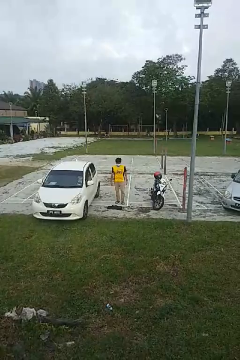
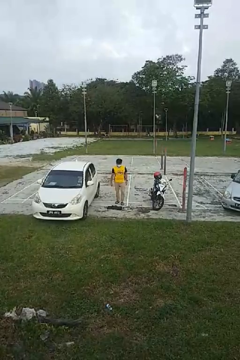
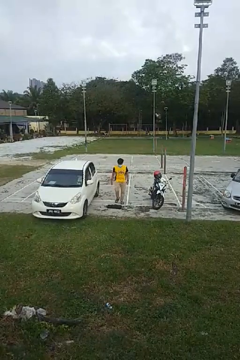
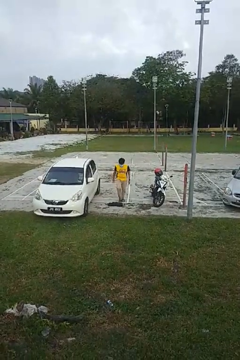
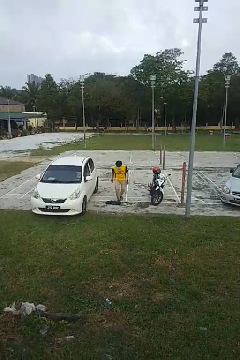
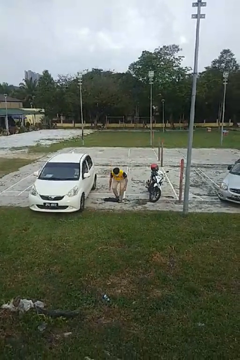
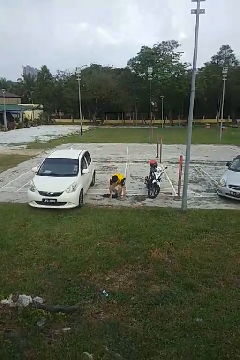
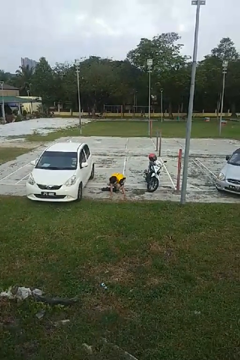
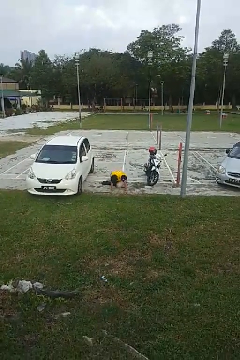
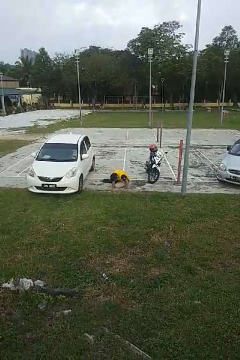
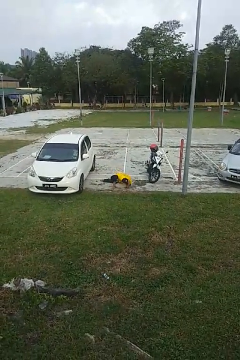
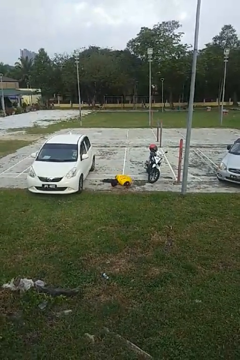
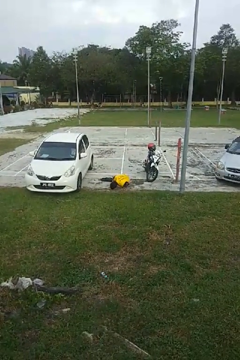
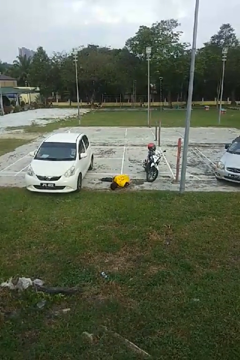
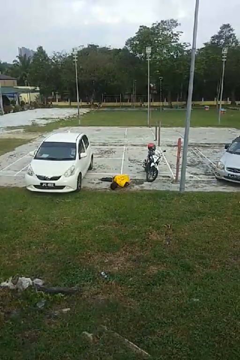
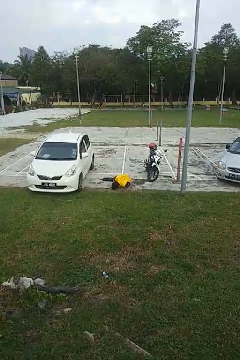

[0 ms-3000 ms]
person trips on object on floor

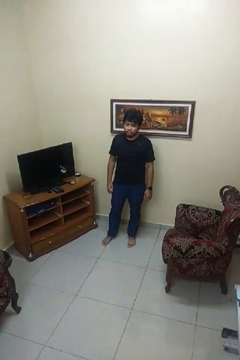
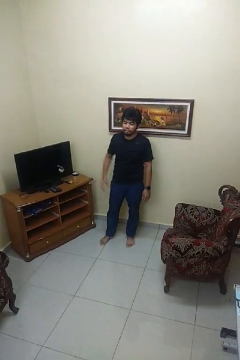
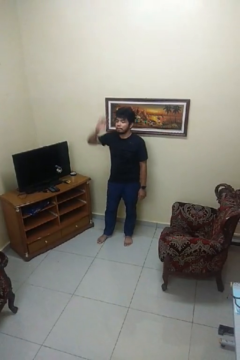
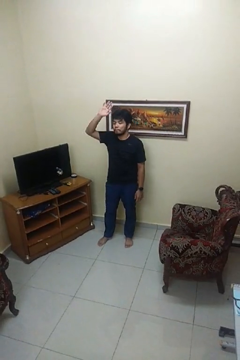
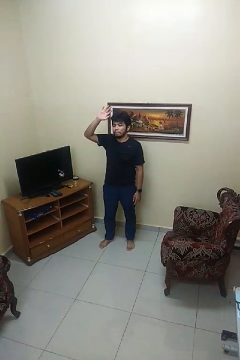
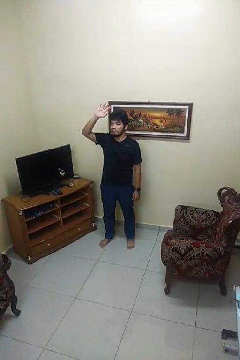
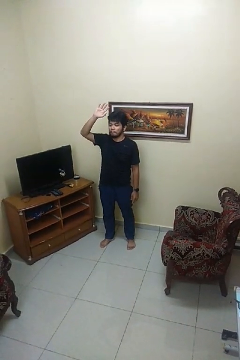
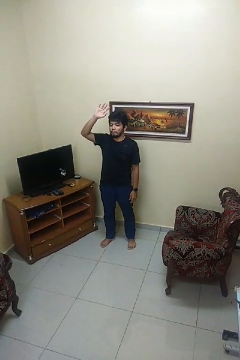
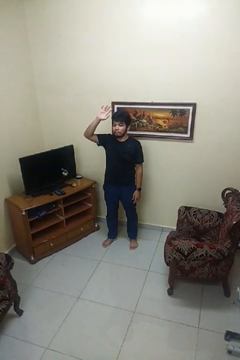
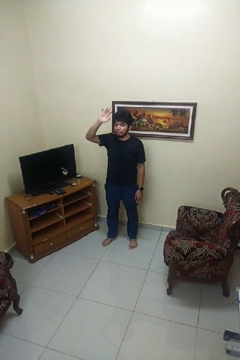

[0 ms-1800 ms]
person gestures raise hand

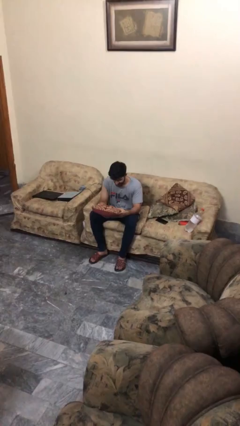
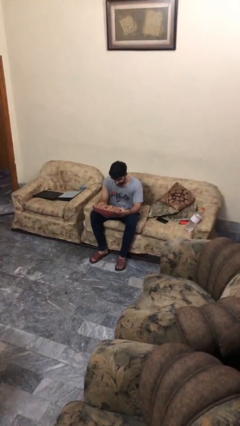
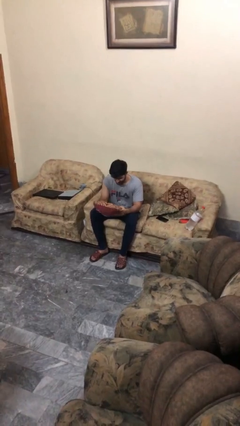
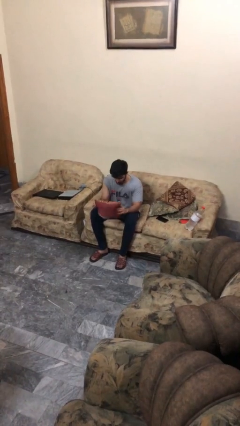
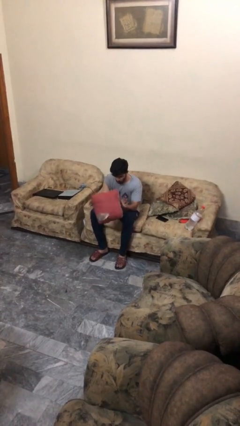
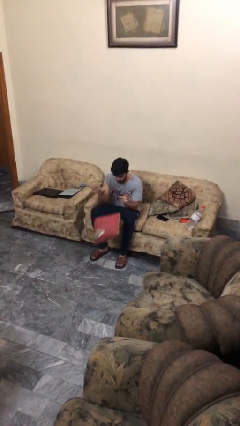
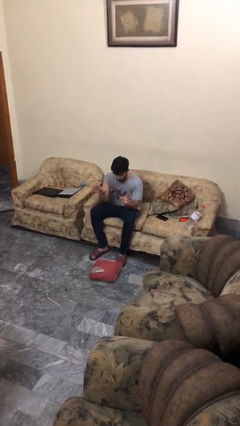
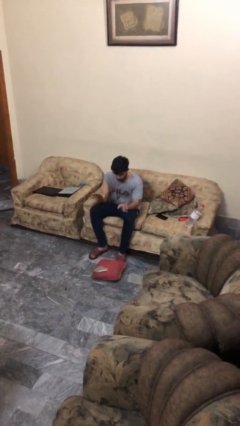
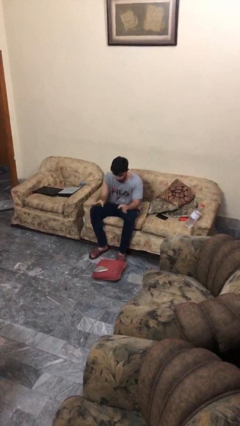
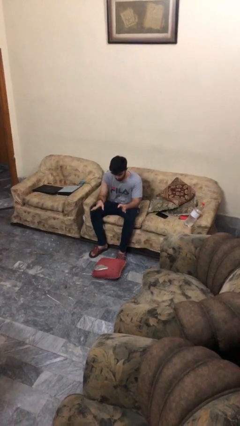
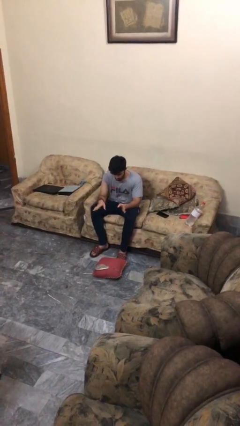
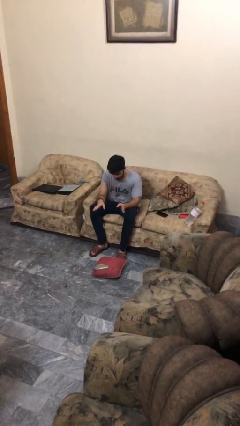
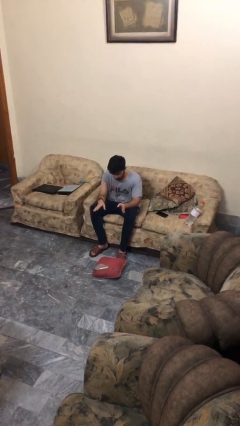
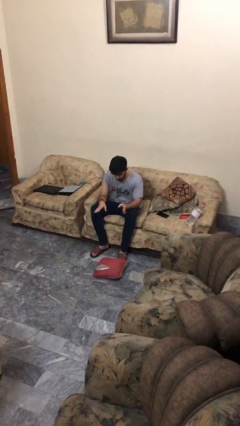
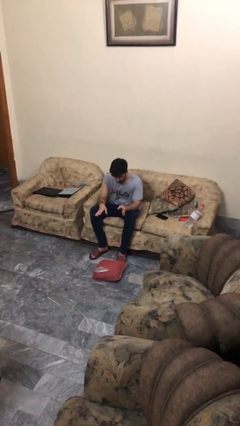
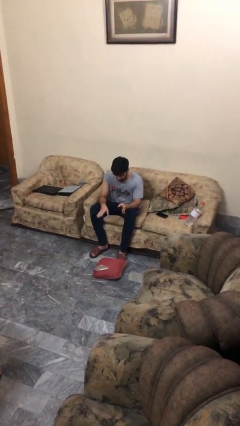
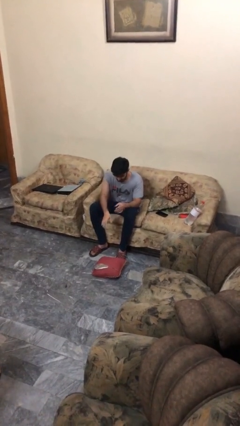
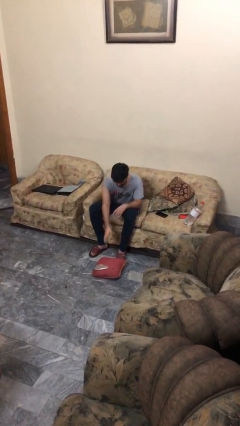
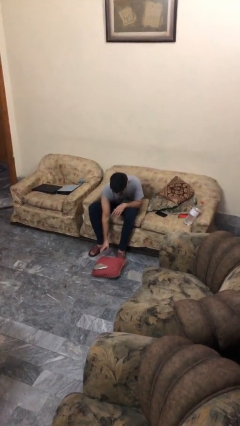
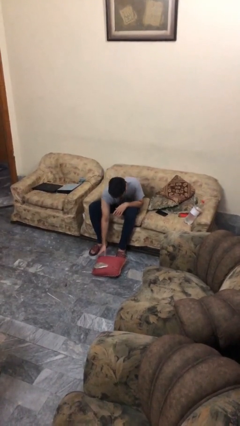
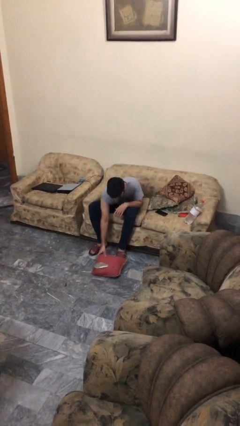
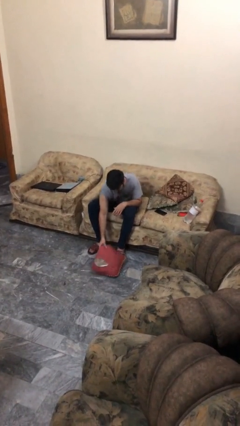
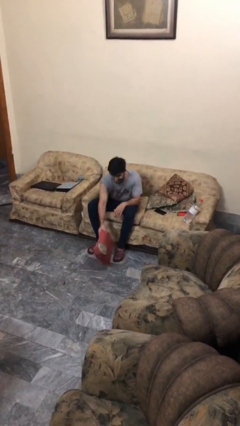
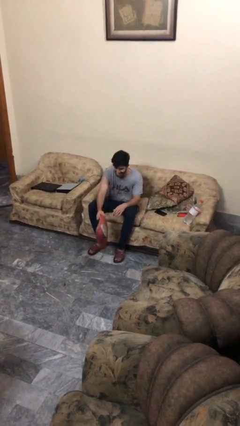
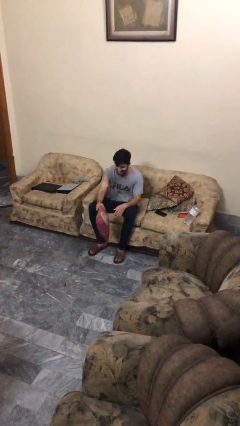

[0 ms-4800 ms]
person drops object

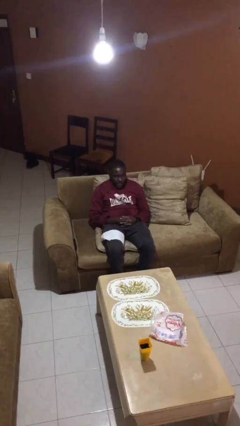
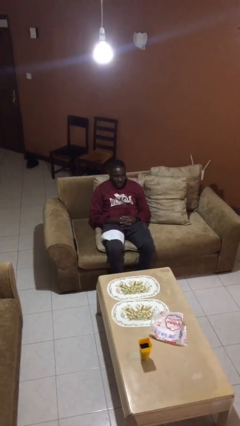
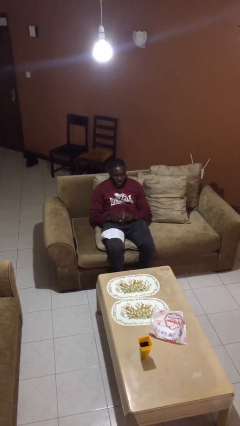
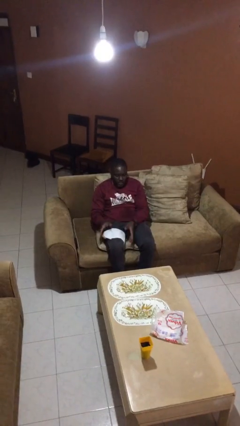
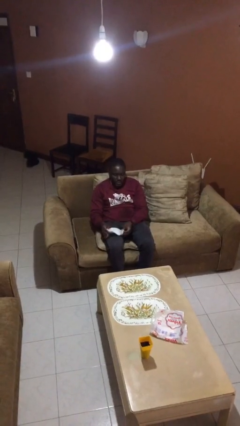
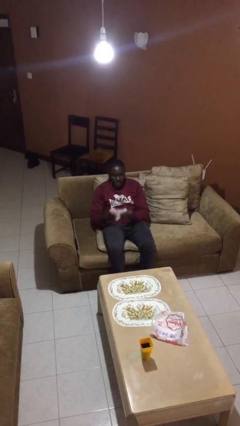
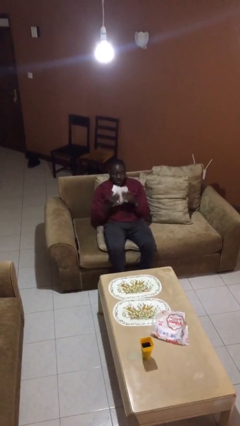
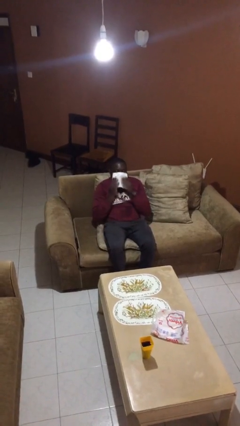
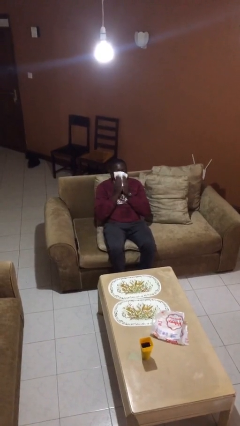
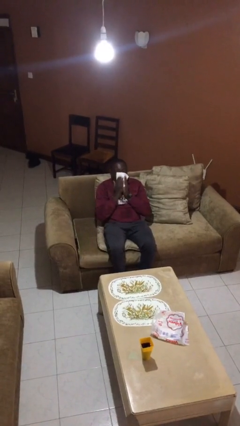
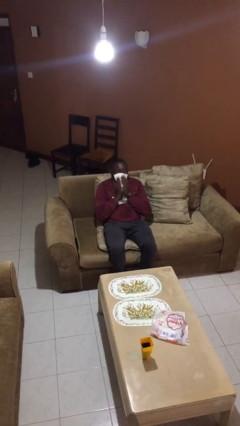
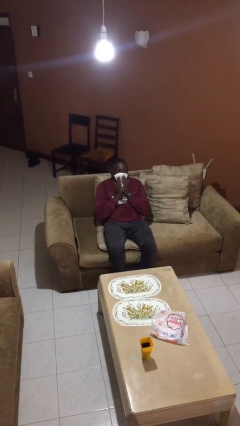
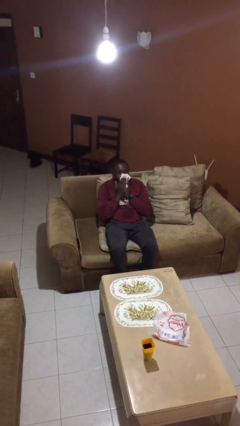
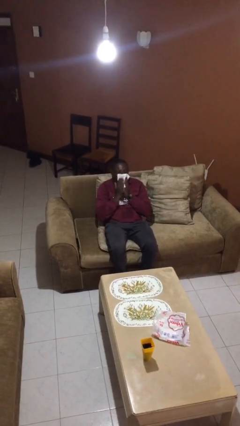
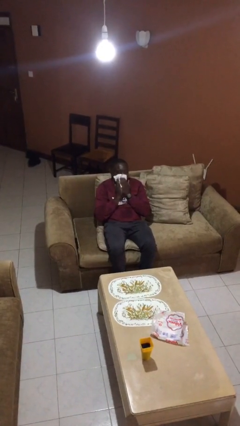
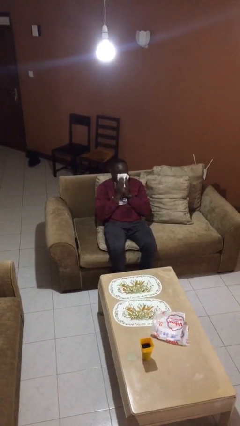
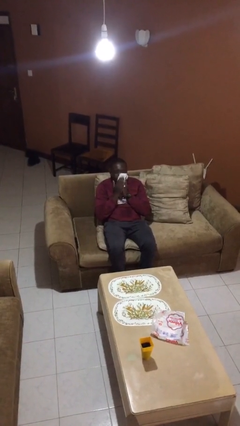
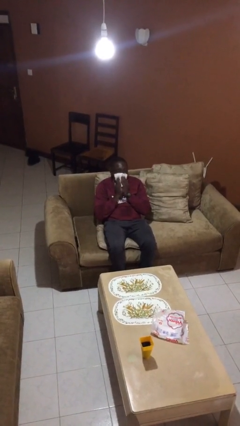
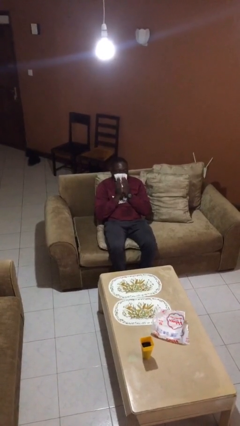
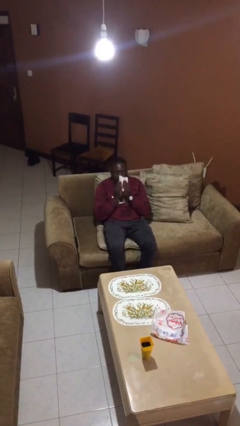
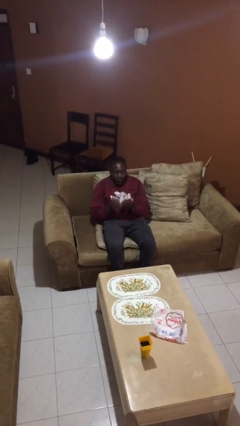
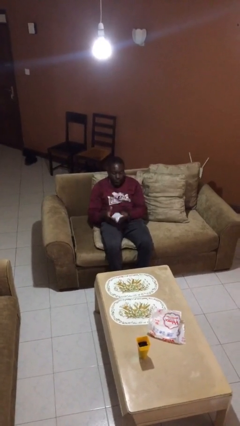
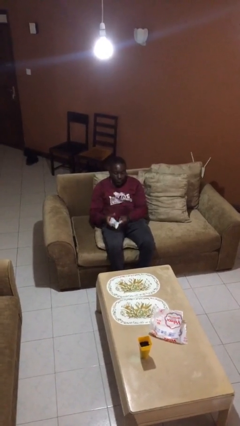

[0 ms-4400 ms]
person wipes mouth with napkin

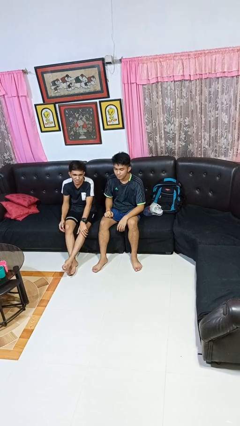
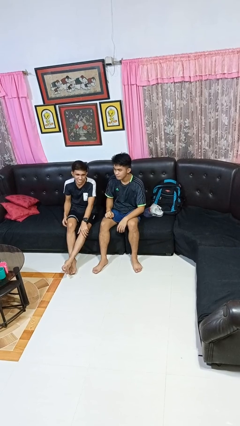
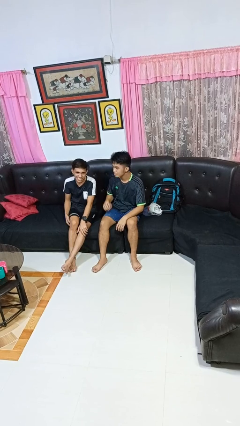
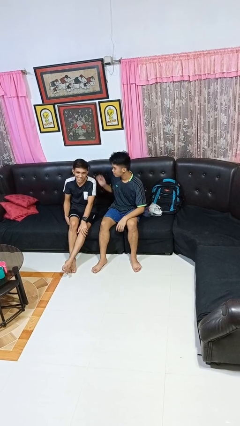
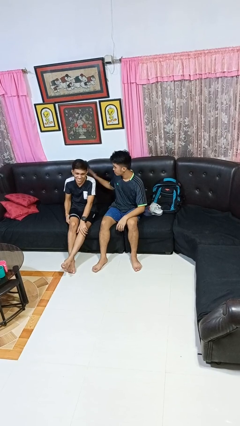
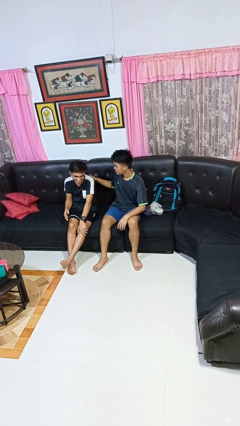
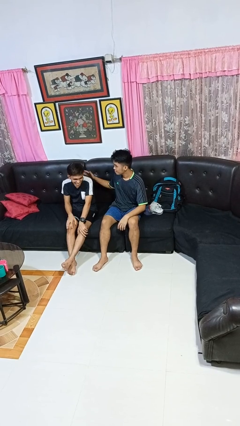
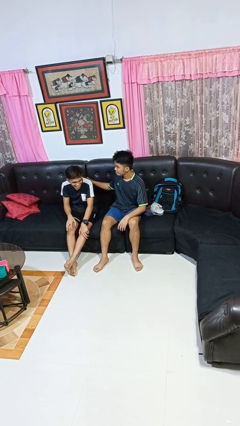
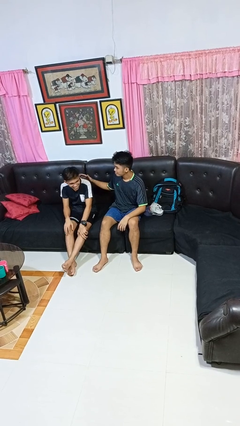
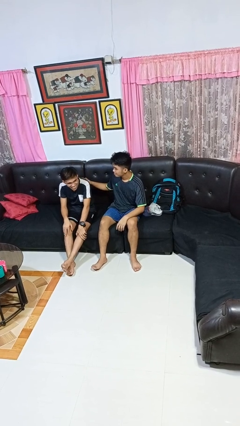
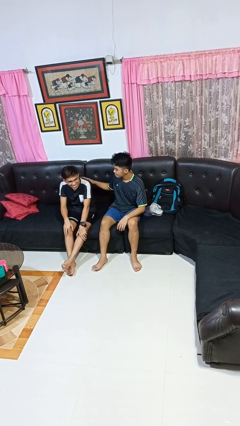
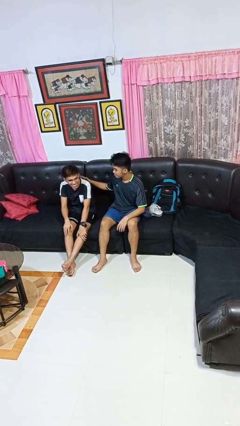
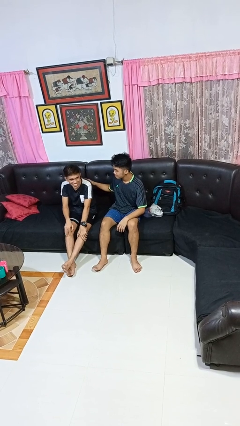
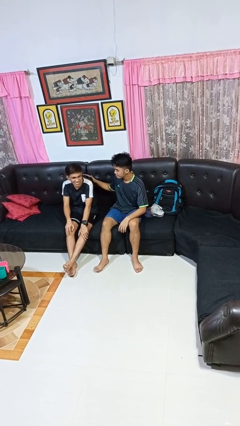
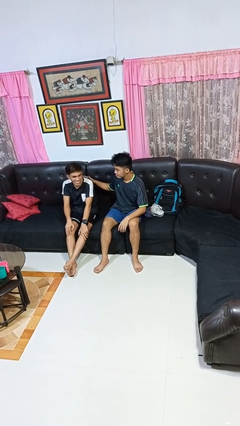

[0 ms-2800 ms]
person touches back of person

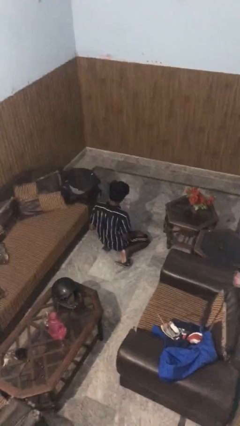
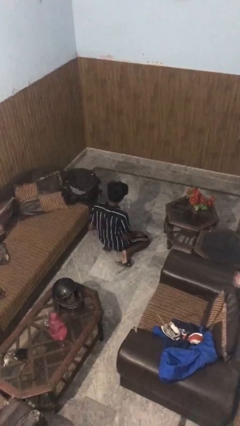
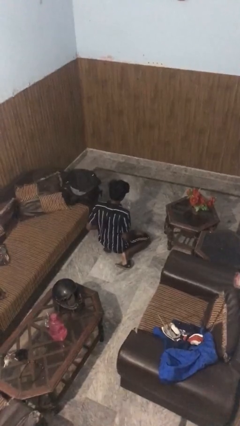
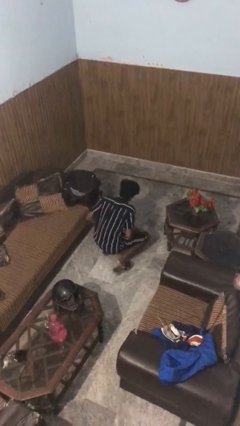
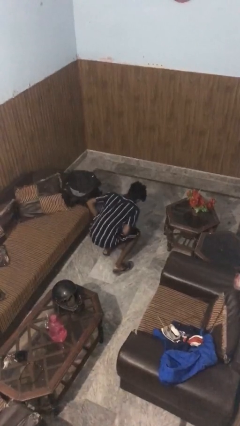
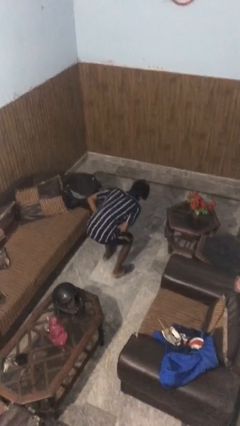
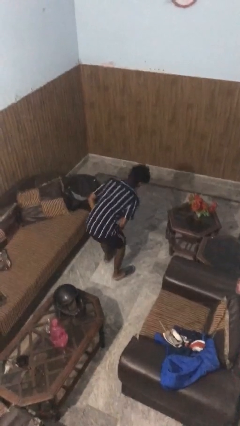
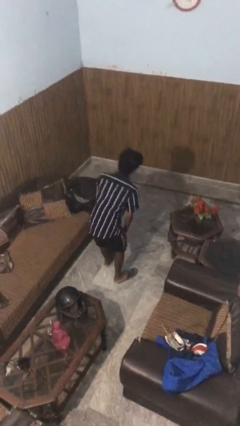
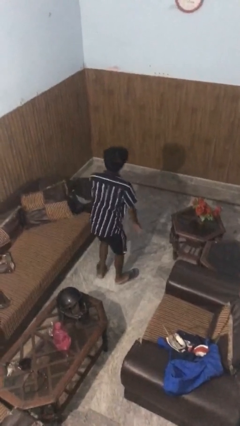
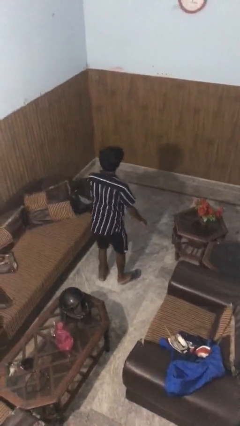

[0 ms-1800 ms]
person stands up from floor
